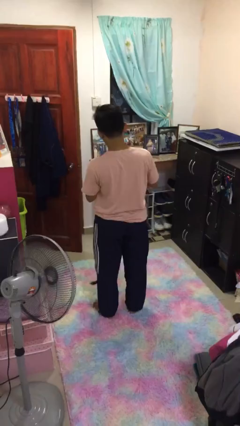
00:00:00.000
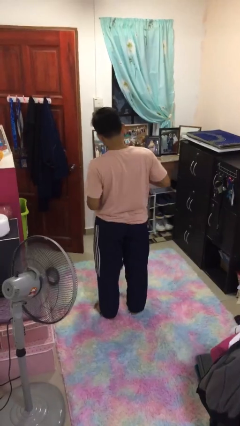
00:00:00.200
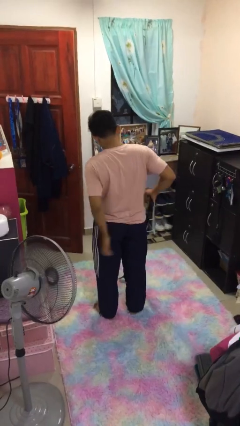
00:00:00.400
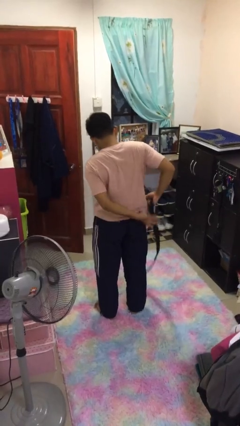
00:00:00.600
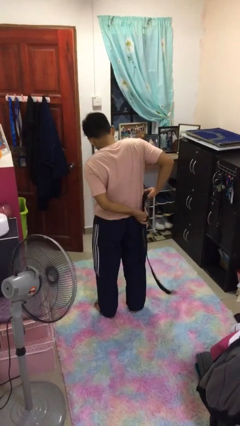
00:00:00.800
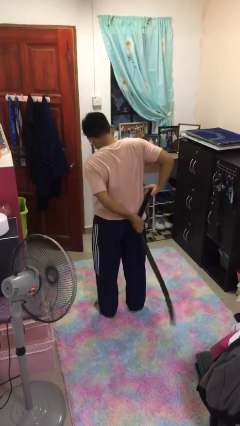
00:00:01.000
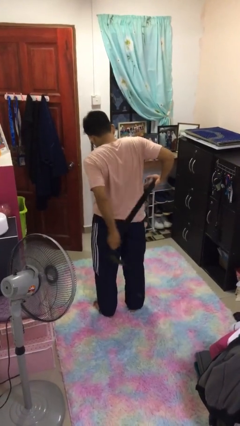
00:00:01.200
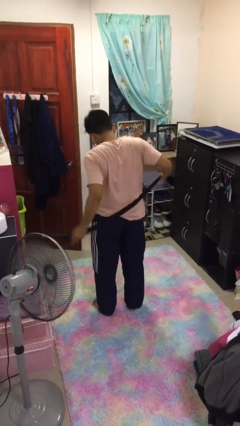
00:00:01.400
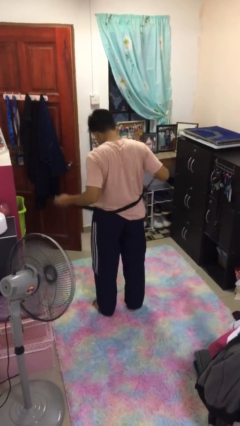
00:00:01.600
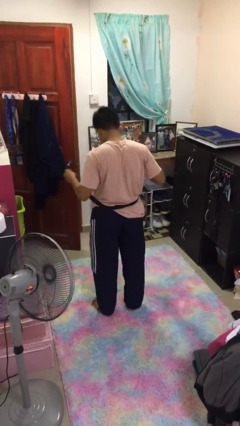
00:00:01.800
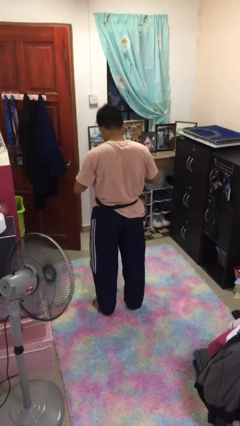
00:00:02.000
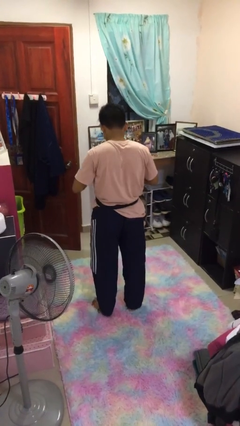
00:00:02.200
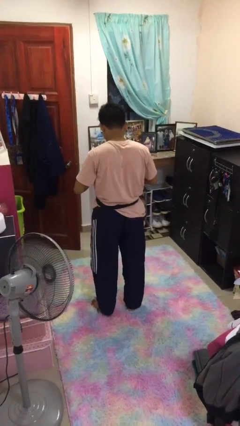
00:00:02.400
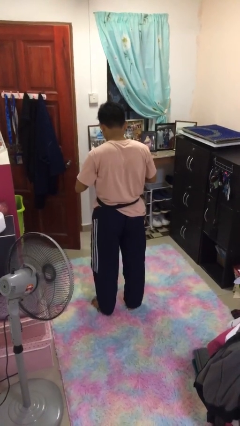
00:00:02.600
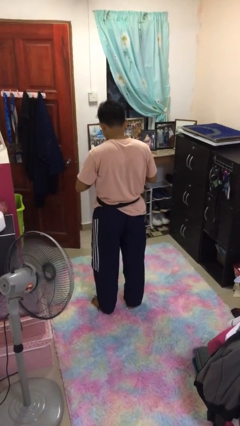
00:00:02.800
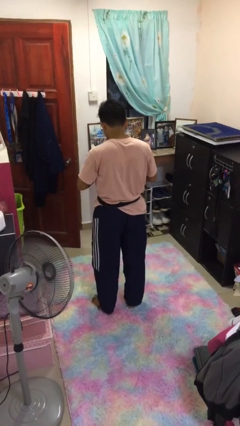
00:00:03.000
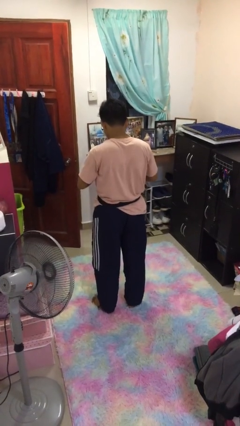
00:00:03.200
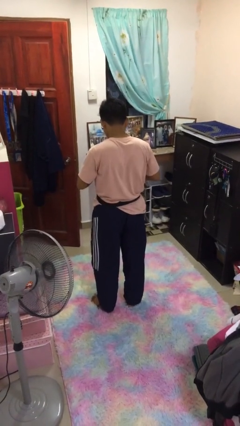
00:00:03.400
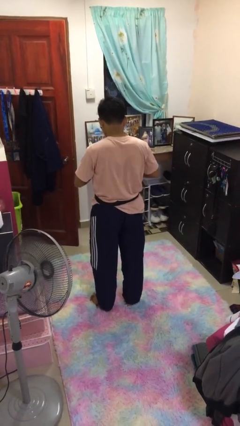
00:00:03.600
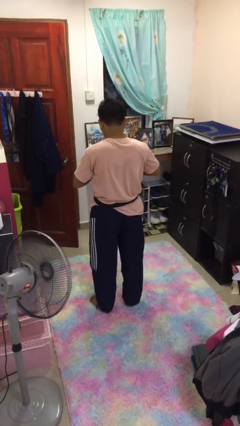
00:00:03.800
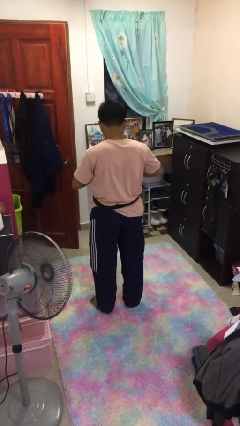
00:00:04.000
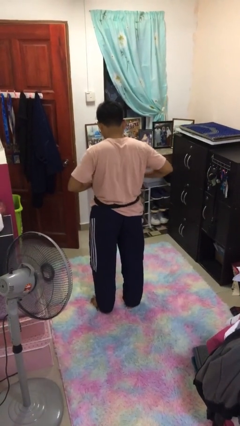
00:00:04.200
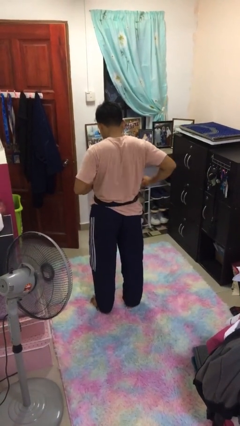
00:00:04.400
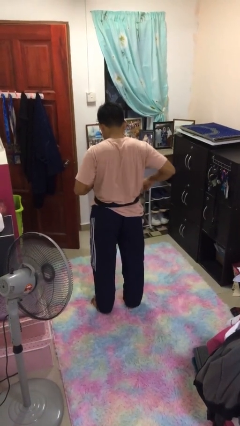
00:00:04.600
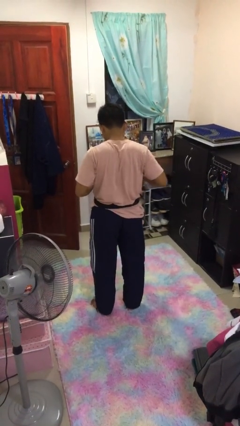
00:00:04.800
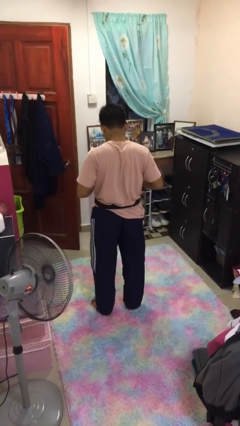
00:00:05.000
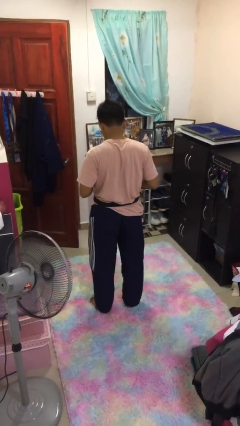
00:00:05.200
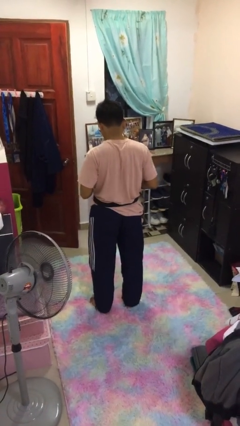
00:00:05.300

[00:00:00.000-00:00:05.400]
person puts on belt

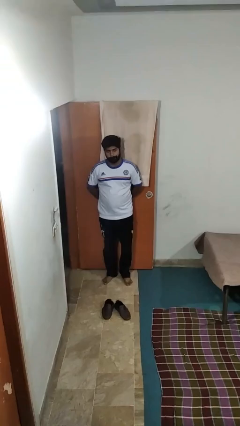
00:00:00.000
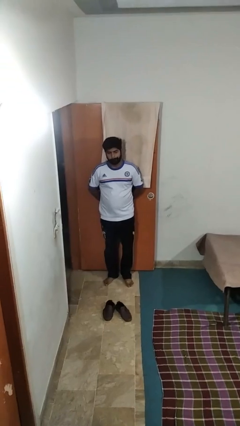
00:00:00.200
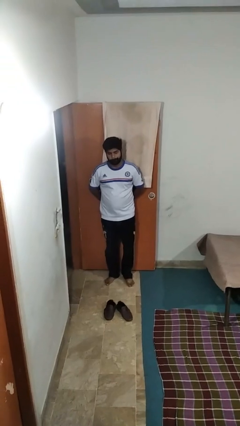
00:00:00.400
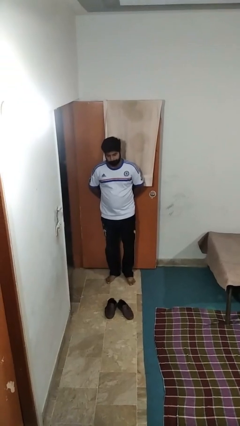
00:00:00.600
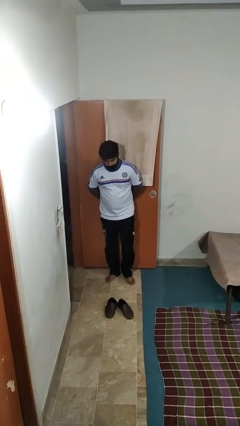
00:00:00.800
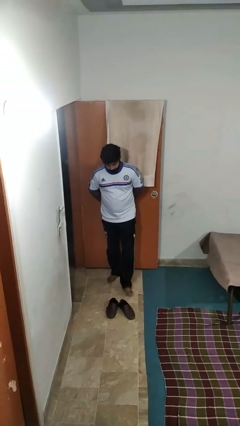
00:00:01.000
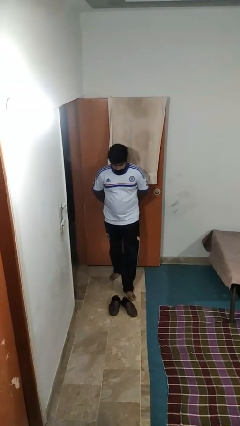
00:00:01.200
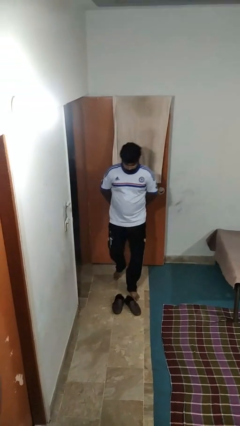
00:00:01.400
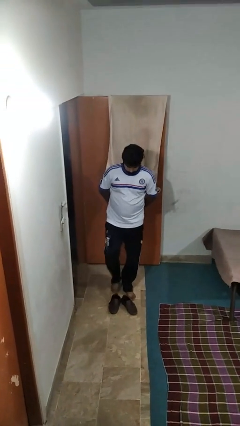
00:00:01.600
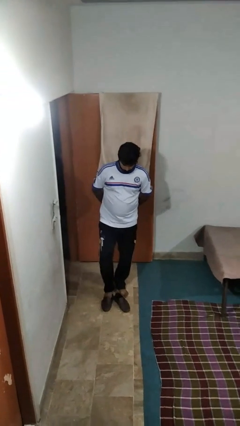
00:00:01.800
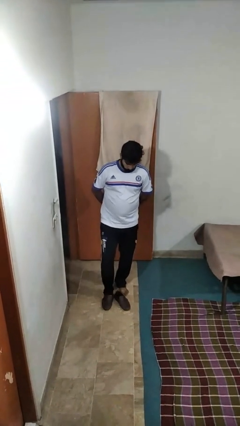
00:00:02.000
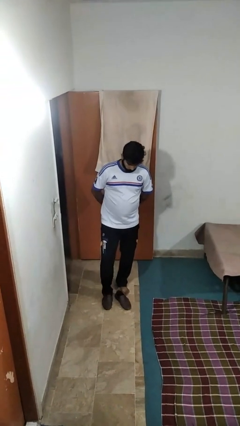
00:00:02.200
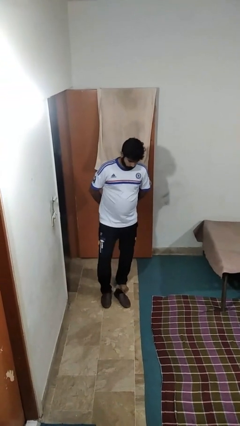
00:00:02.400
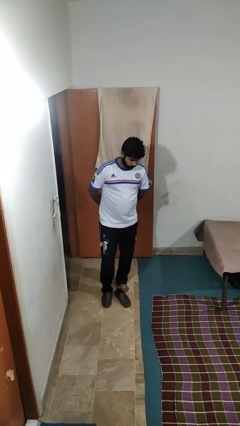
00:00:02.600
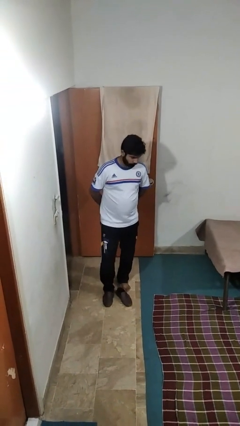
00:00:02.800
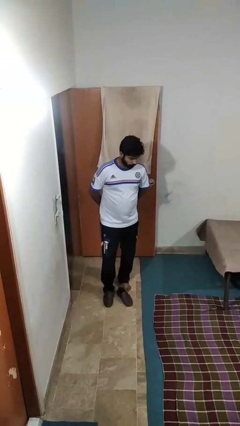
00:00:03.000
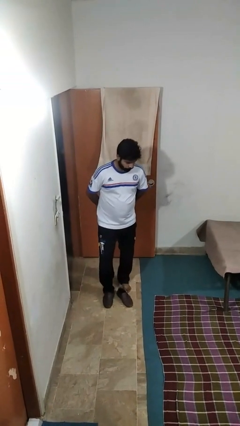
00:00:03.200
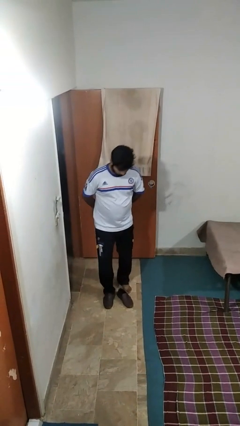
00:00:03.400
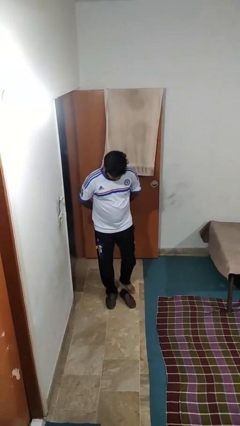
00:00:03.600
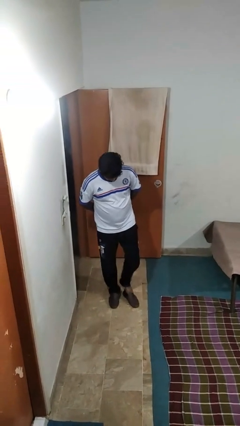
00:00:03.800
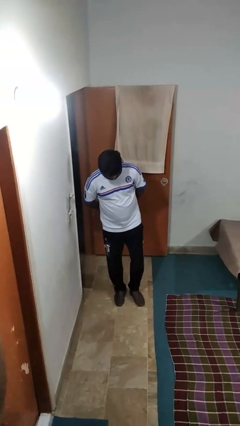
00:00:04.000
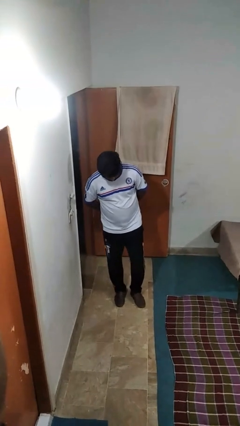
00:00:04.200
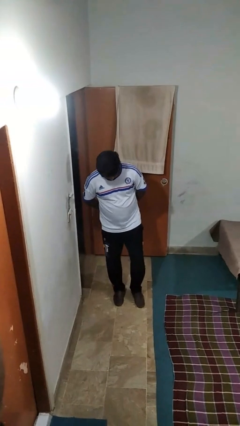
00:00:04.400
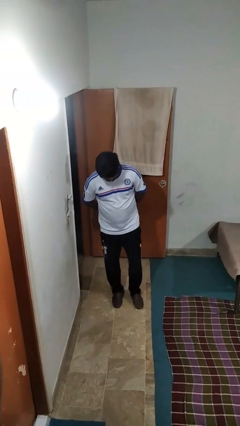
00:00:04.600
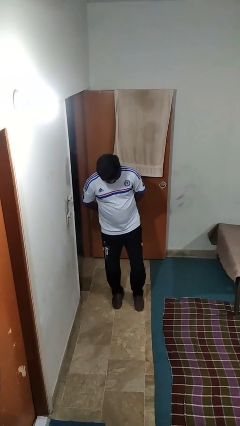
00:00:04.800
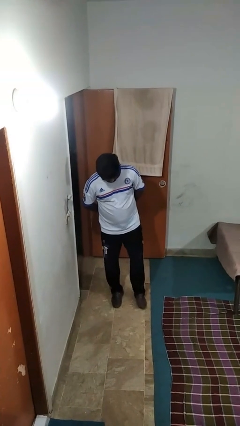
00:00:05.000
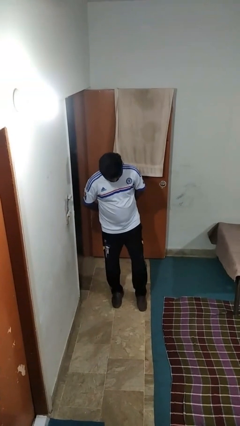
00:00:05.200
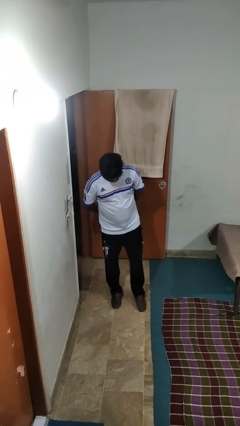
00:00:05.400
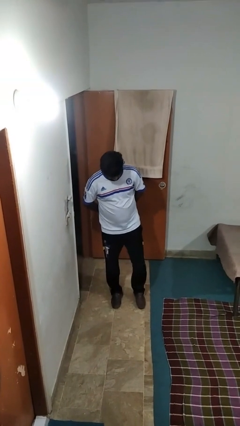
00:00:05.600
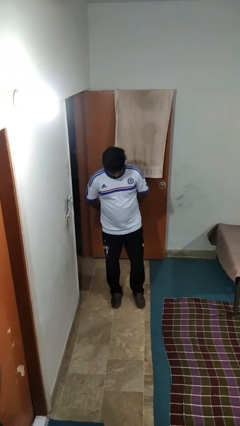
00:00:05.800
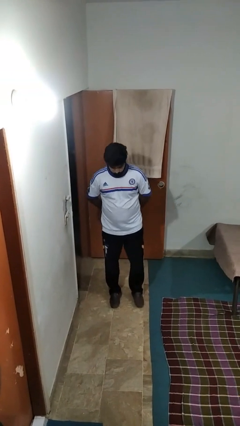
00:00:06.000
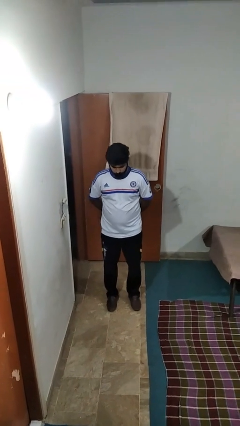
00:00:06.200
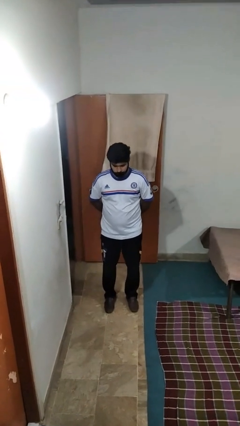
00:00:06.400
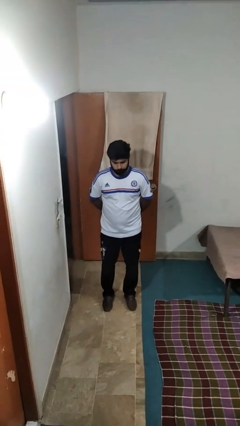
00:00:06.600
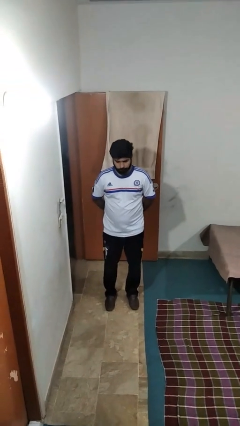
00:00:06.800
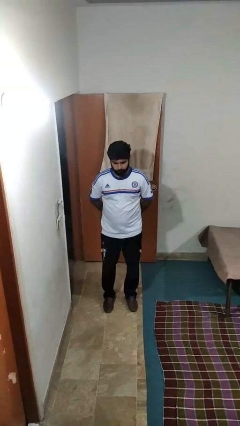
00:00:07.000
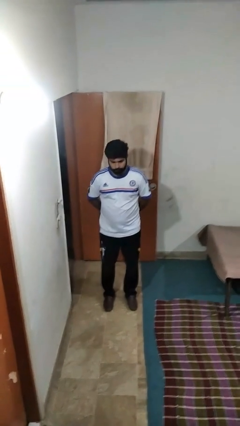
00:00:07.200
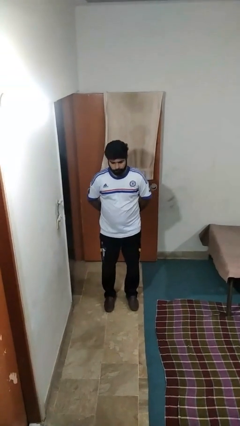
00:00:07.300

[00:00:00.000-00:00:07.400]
person puts on shoes

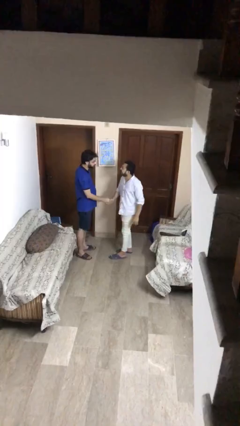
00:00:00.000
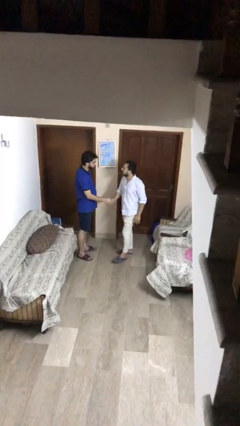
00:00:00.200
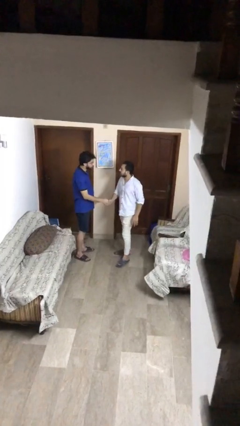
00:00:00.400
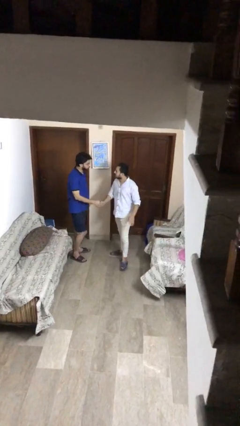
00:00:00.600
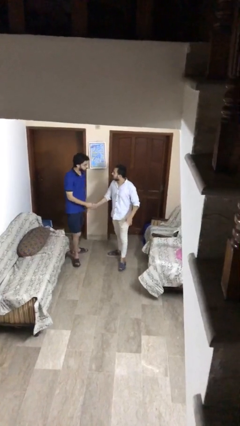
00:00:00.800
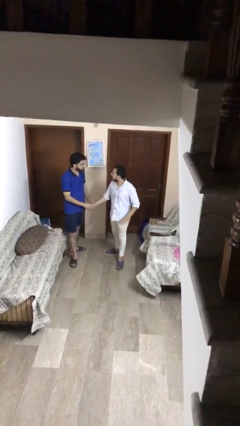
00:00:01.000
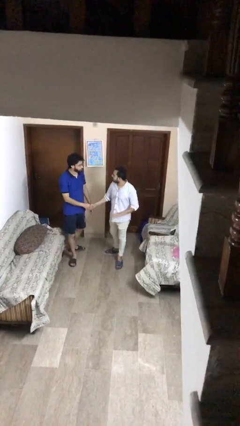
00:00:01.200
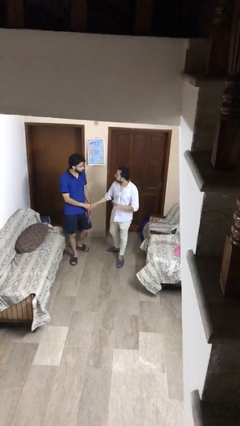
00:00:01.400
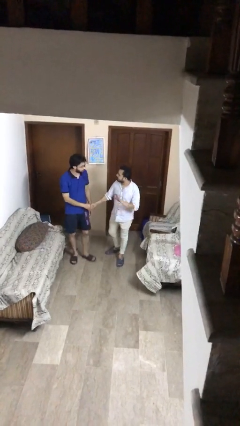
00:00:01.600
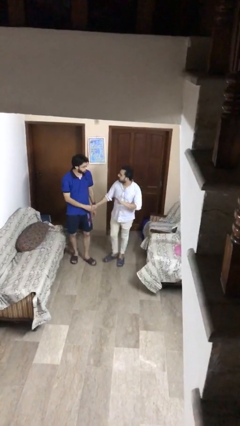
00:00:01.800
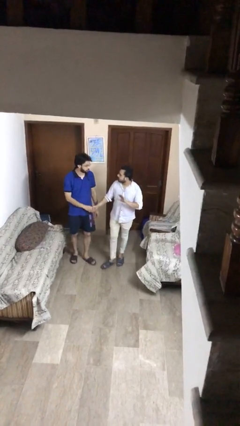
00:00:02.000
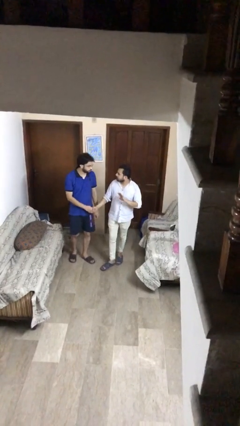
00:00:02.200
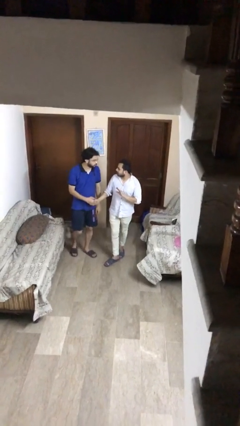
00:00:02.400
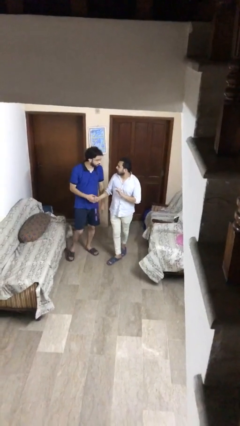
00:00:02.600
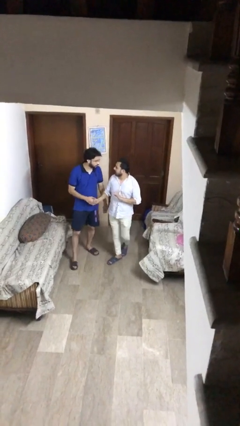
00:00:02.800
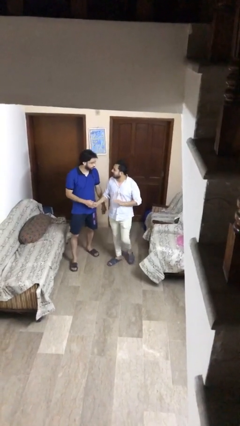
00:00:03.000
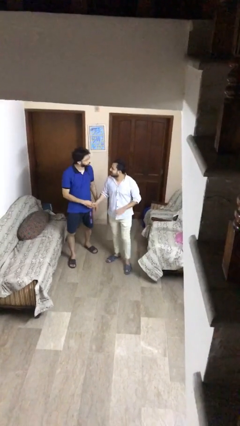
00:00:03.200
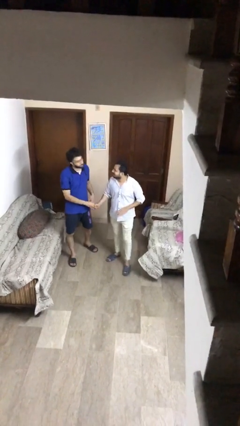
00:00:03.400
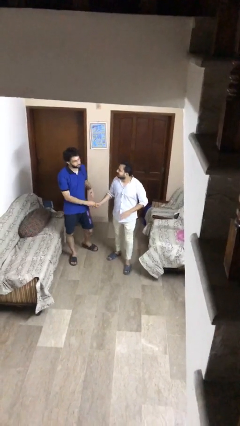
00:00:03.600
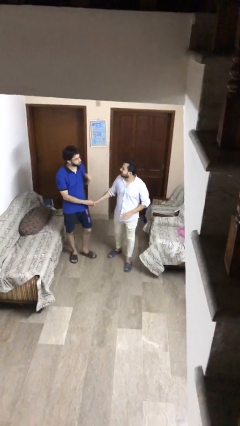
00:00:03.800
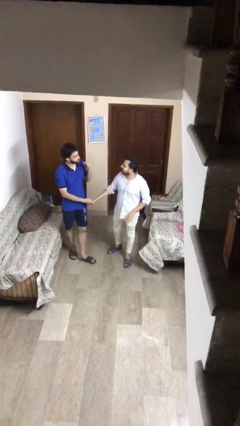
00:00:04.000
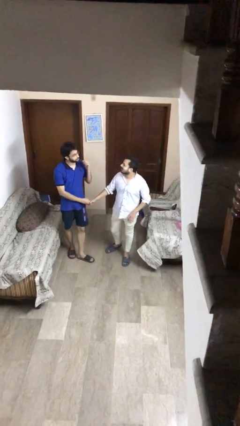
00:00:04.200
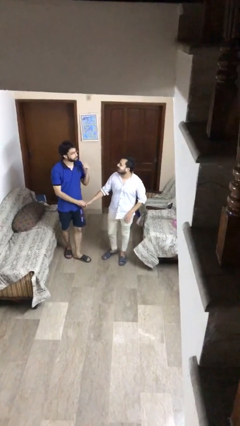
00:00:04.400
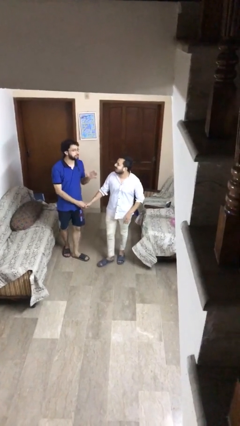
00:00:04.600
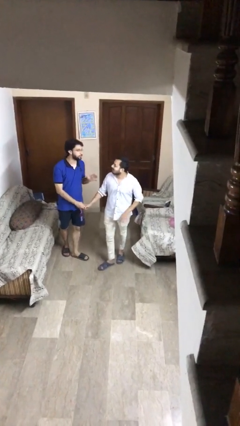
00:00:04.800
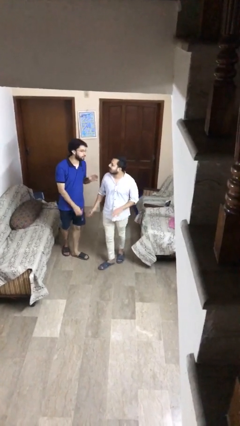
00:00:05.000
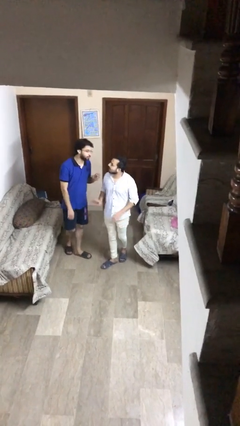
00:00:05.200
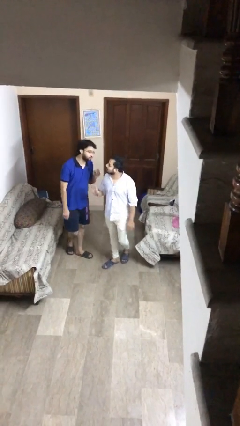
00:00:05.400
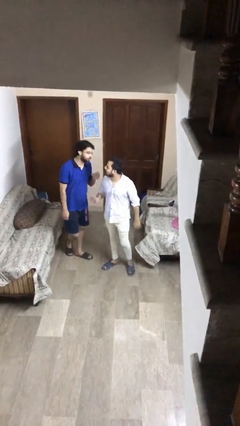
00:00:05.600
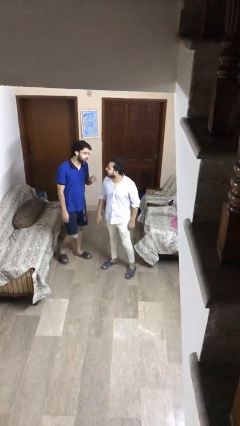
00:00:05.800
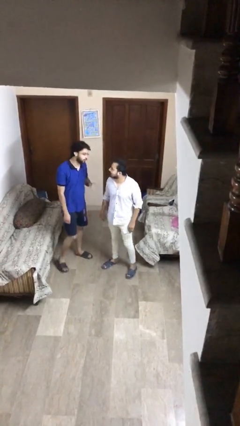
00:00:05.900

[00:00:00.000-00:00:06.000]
person talks to person
